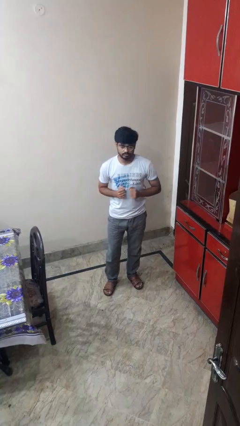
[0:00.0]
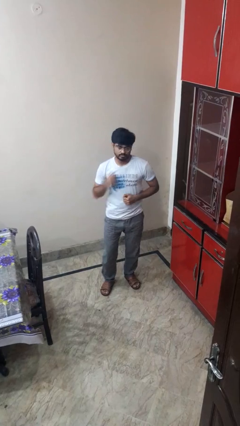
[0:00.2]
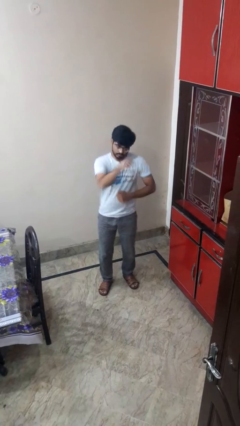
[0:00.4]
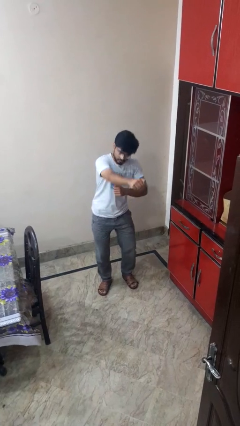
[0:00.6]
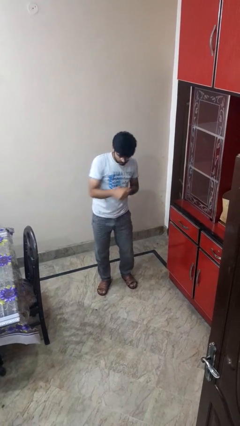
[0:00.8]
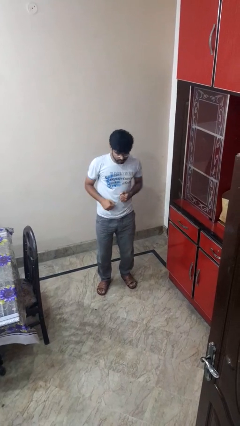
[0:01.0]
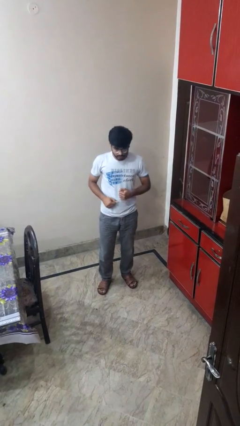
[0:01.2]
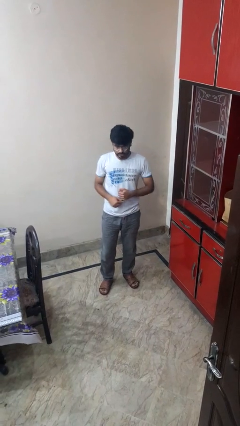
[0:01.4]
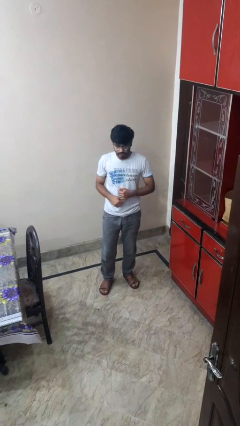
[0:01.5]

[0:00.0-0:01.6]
person punches

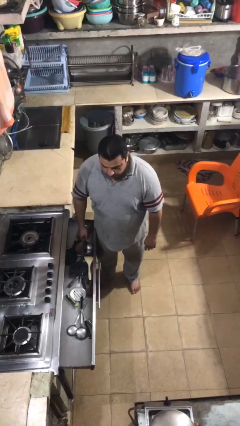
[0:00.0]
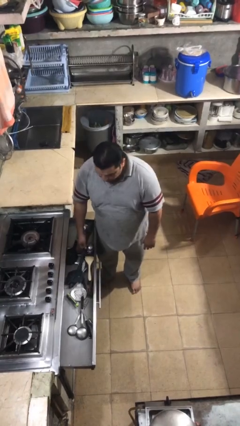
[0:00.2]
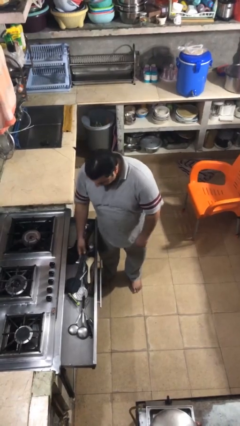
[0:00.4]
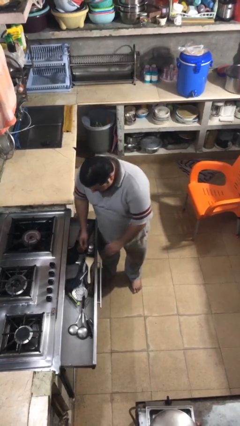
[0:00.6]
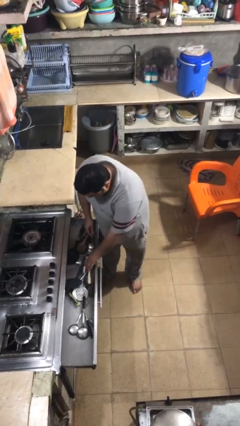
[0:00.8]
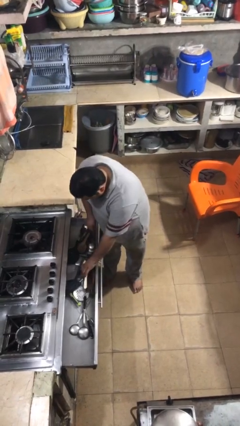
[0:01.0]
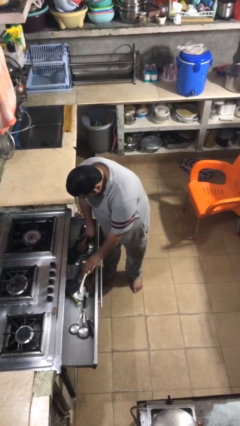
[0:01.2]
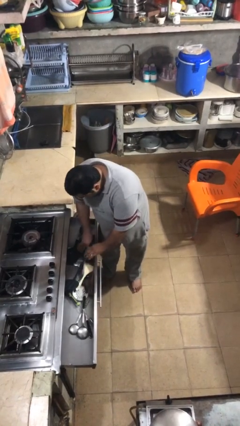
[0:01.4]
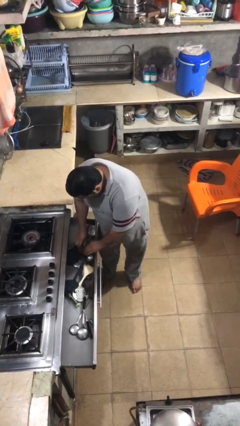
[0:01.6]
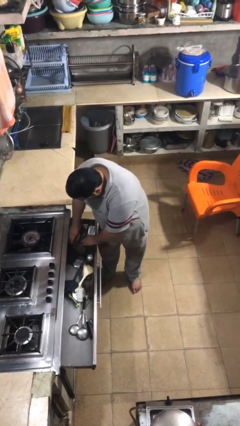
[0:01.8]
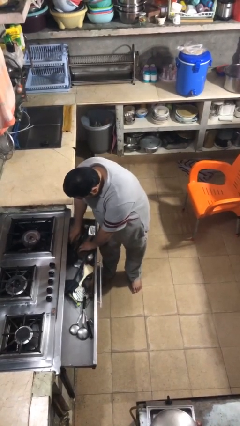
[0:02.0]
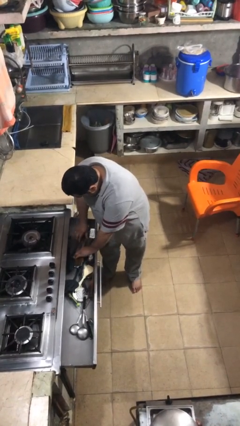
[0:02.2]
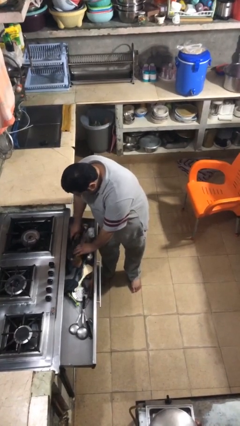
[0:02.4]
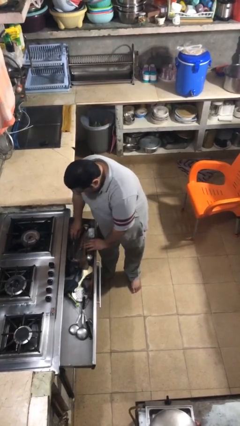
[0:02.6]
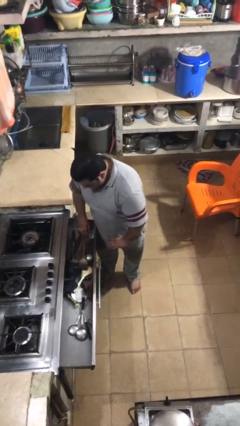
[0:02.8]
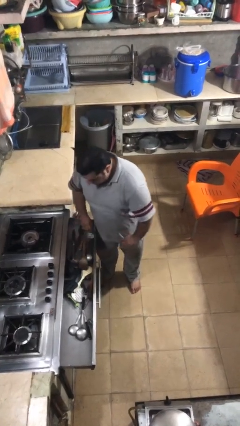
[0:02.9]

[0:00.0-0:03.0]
person searches in kitchen drawer

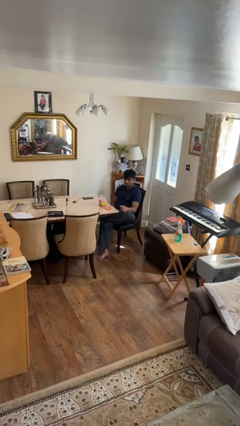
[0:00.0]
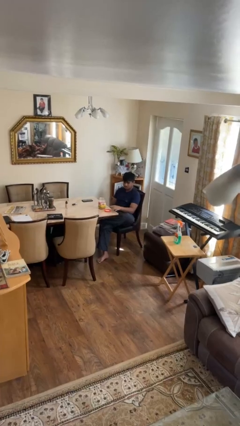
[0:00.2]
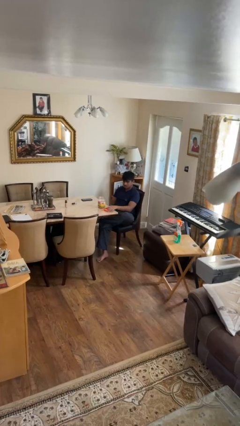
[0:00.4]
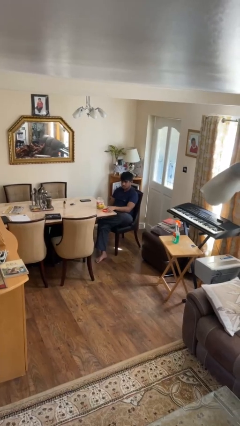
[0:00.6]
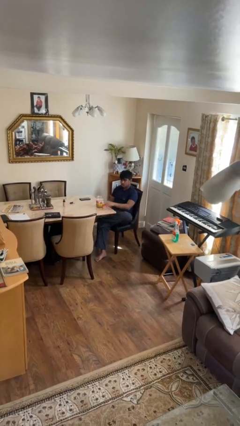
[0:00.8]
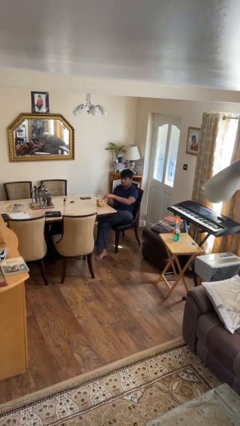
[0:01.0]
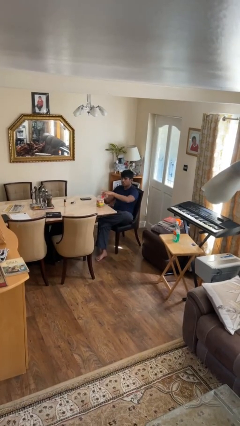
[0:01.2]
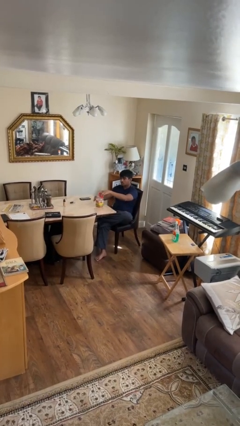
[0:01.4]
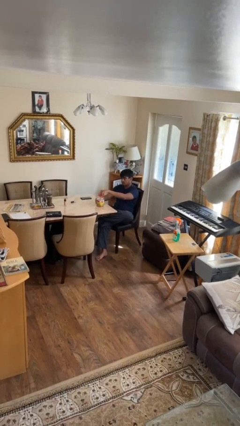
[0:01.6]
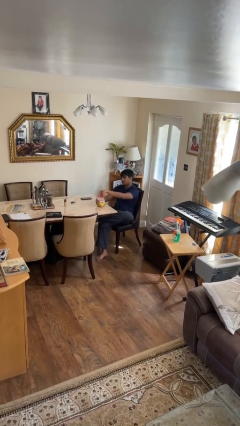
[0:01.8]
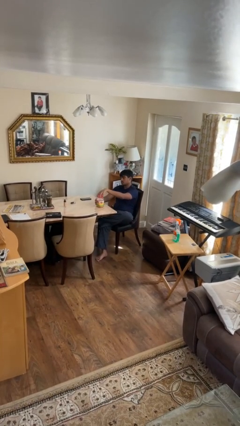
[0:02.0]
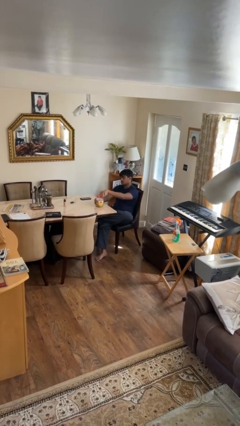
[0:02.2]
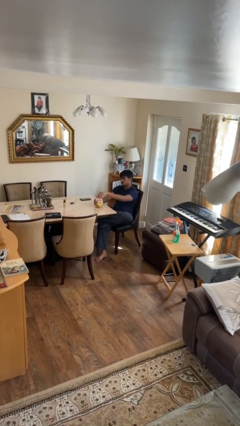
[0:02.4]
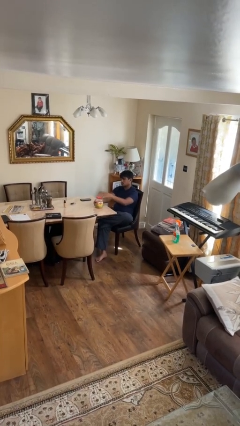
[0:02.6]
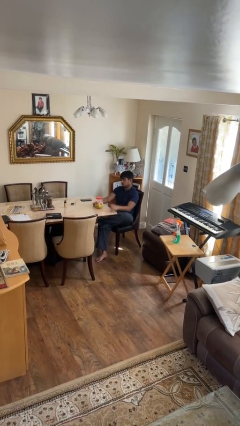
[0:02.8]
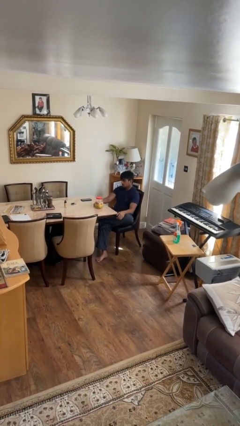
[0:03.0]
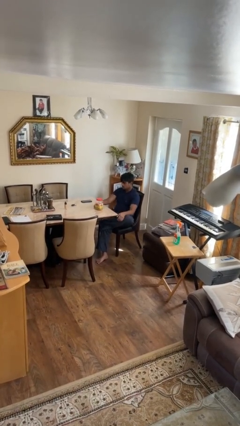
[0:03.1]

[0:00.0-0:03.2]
person closes jar

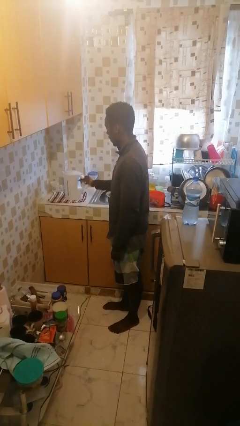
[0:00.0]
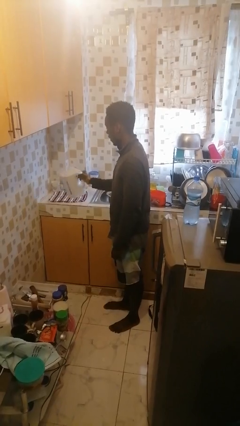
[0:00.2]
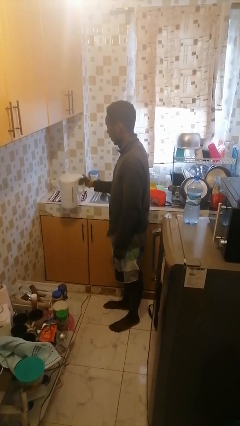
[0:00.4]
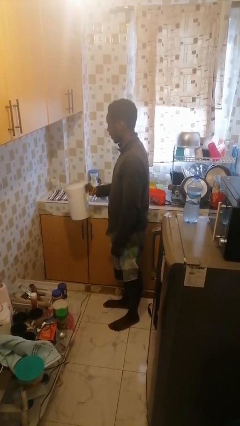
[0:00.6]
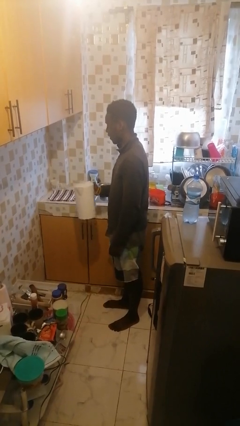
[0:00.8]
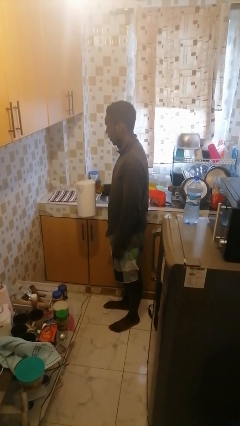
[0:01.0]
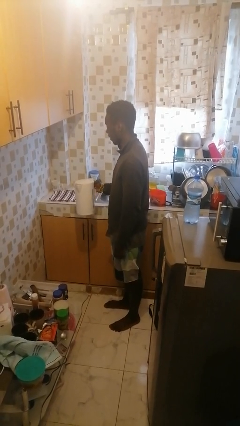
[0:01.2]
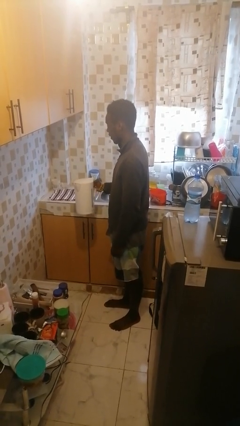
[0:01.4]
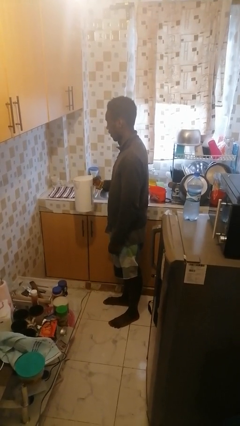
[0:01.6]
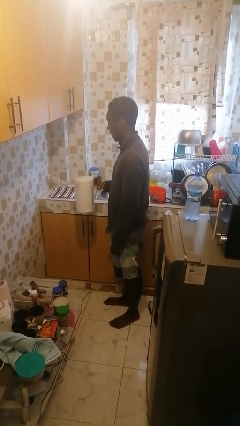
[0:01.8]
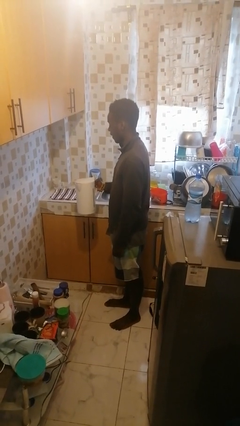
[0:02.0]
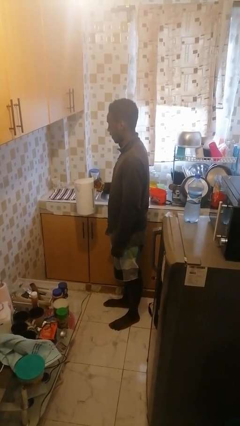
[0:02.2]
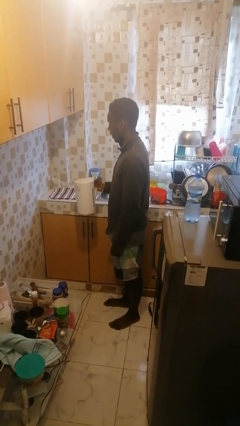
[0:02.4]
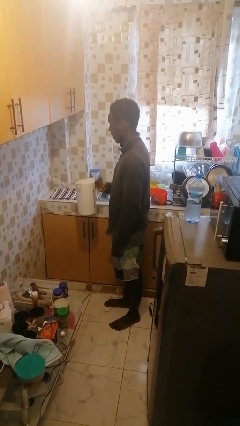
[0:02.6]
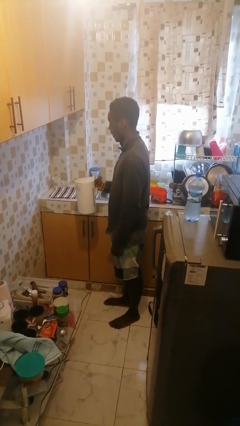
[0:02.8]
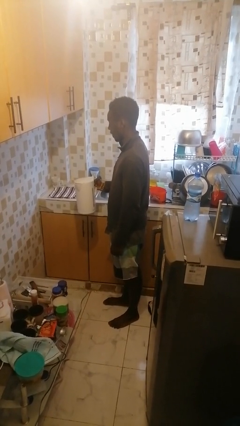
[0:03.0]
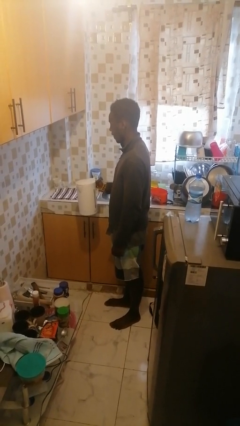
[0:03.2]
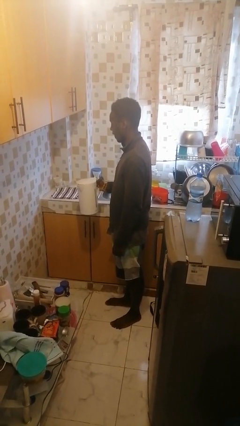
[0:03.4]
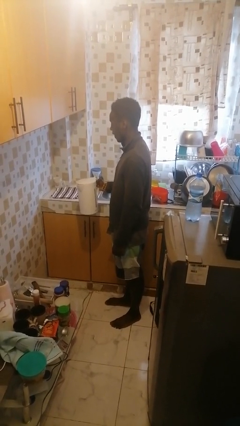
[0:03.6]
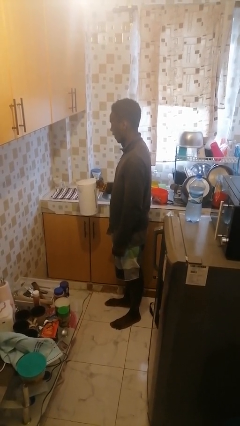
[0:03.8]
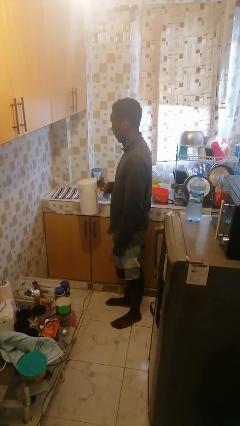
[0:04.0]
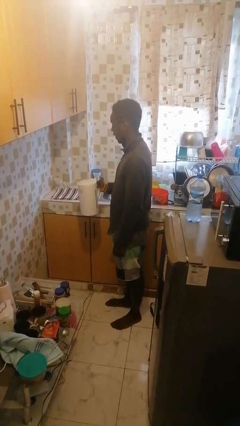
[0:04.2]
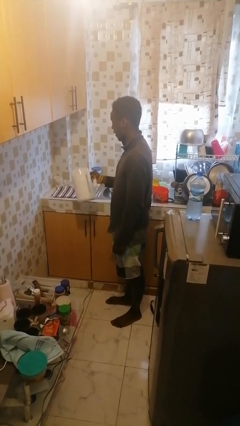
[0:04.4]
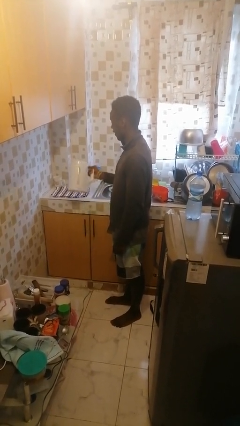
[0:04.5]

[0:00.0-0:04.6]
person picks up object from countertop

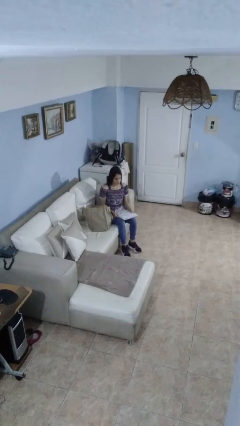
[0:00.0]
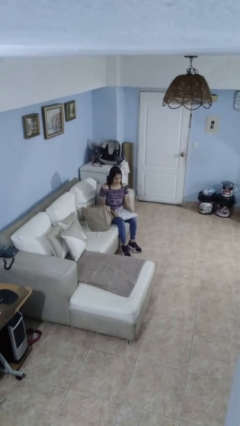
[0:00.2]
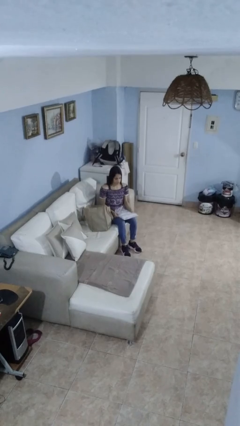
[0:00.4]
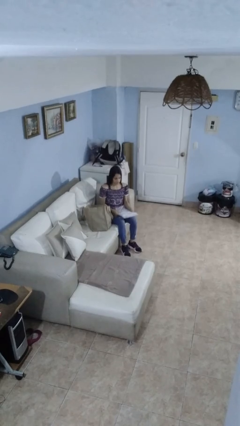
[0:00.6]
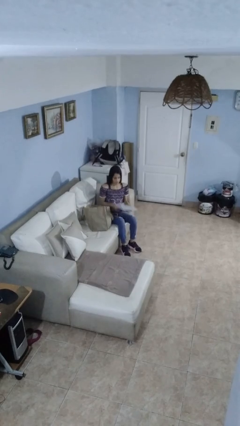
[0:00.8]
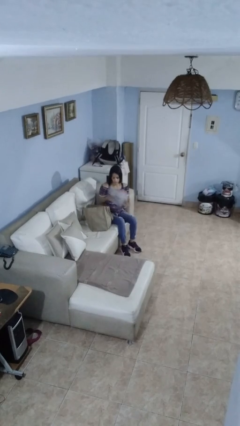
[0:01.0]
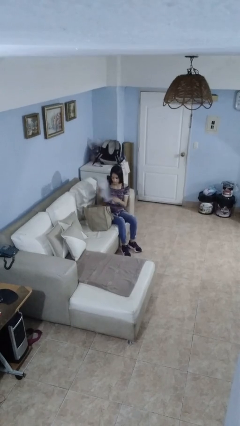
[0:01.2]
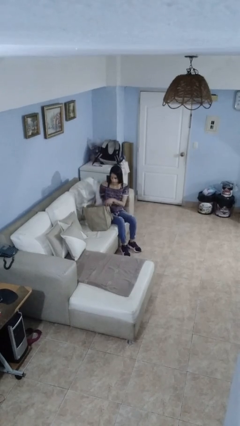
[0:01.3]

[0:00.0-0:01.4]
person puts object into bag

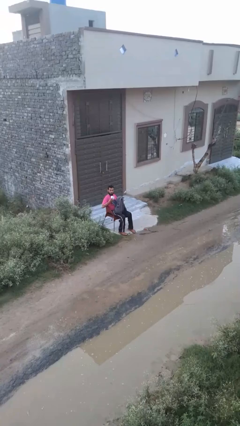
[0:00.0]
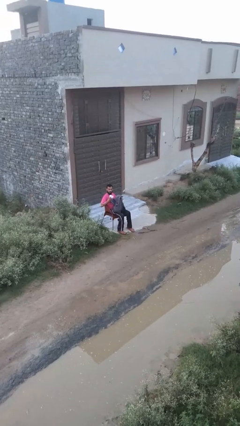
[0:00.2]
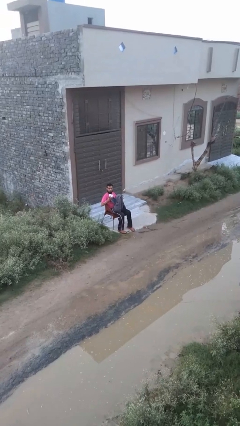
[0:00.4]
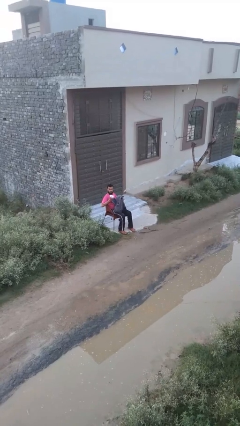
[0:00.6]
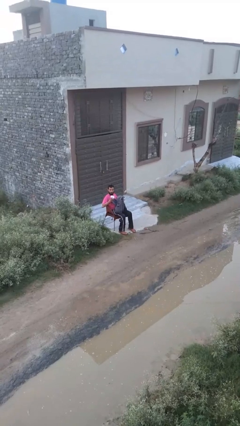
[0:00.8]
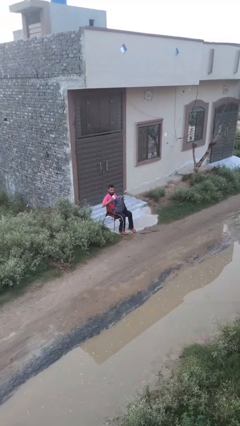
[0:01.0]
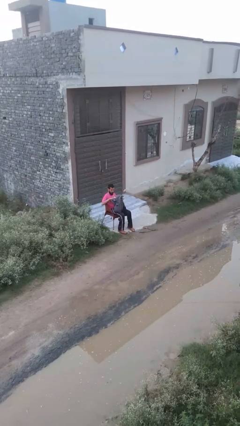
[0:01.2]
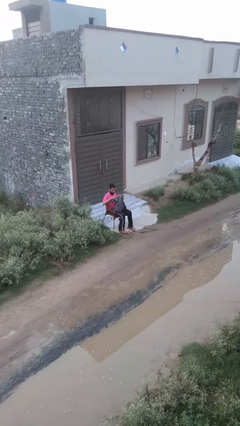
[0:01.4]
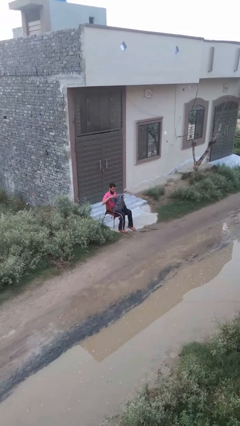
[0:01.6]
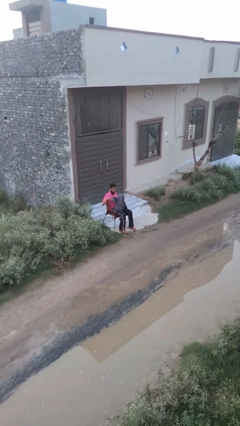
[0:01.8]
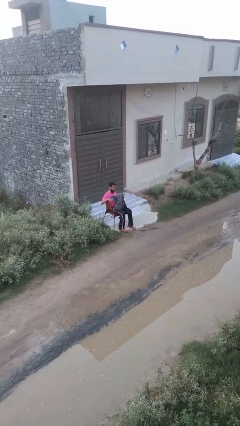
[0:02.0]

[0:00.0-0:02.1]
person puts object into backpack

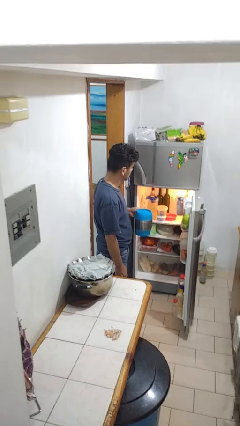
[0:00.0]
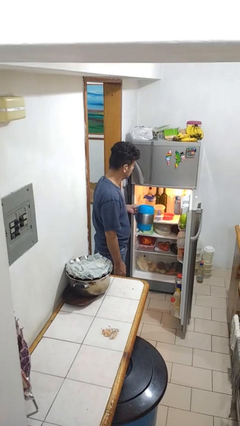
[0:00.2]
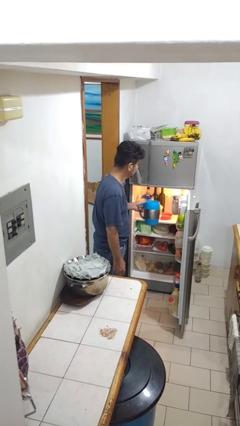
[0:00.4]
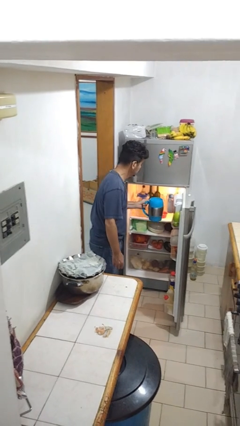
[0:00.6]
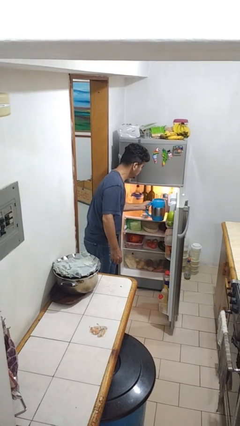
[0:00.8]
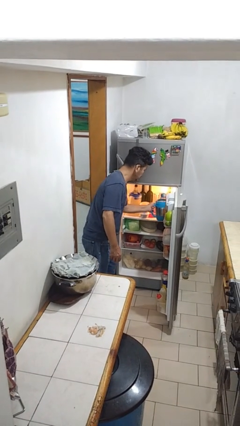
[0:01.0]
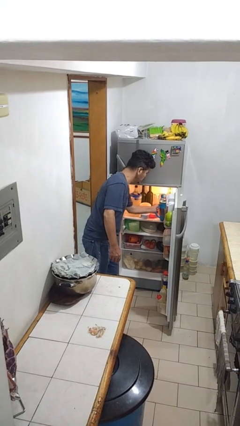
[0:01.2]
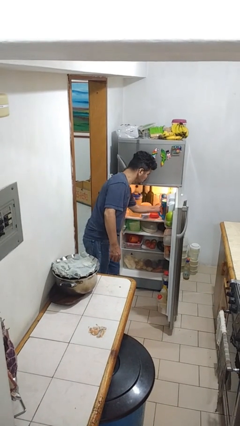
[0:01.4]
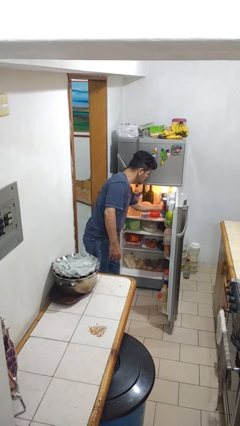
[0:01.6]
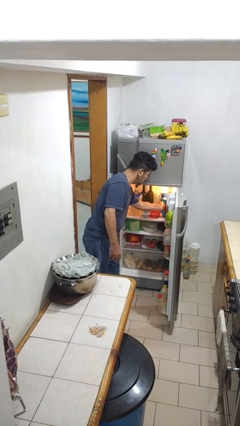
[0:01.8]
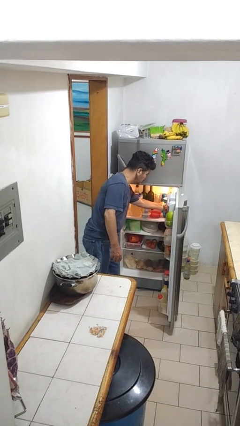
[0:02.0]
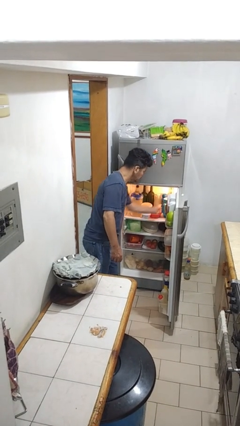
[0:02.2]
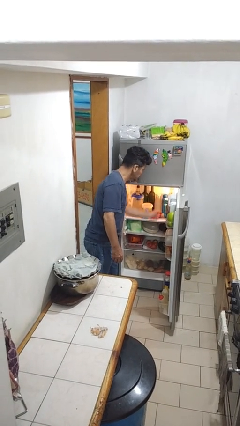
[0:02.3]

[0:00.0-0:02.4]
person puts object into refrigerator
